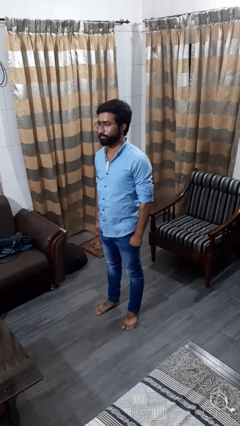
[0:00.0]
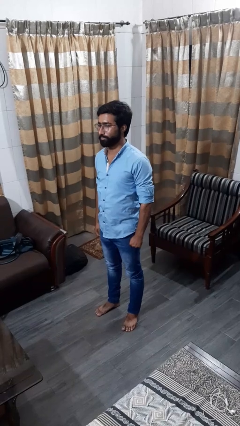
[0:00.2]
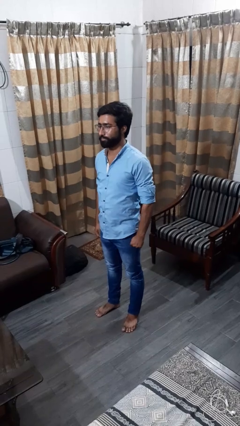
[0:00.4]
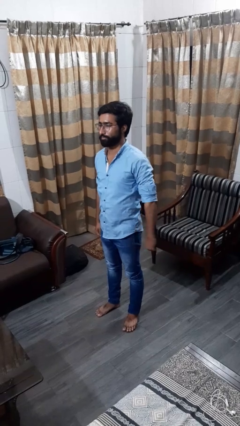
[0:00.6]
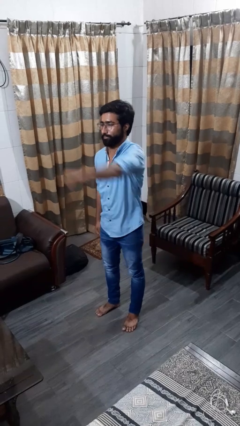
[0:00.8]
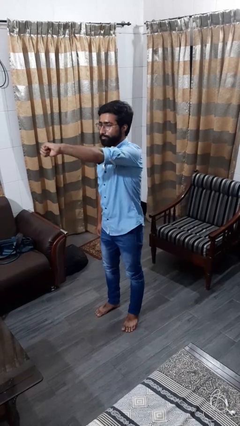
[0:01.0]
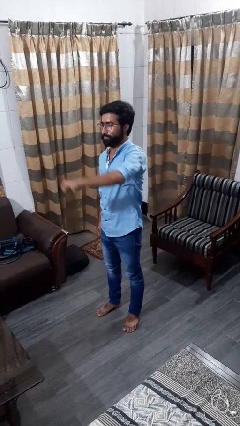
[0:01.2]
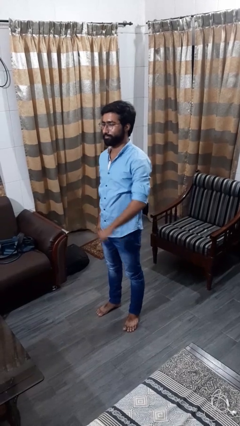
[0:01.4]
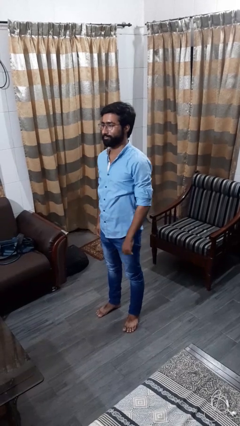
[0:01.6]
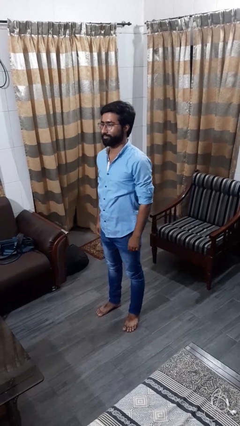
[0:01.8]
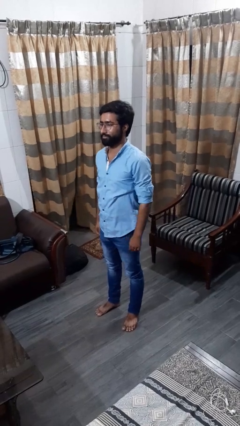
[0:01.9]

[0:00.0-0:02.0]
person punches

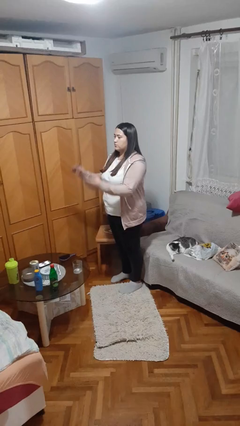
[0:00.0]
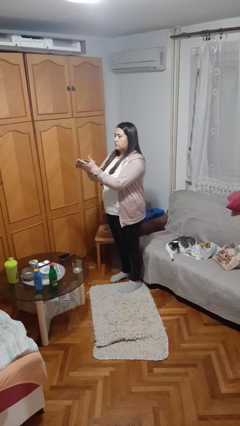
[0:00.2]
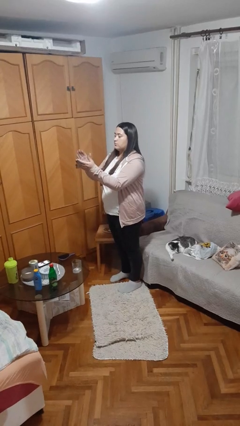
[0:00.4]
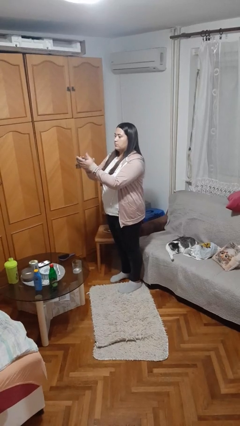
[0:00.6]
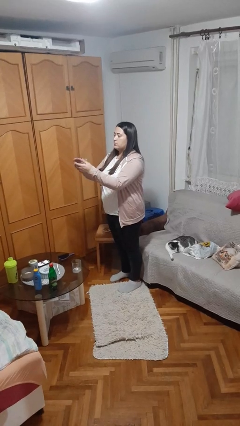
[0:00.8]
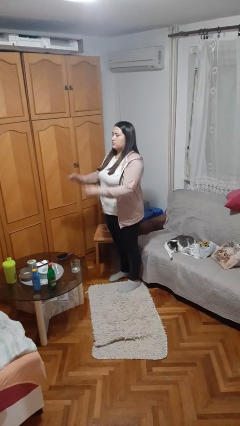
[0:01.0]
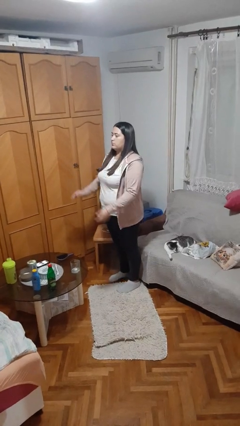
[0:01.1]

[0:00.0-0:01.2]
person claps hands

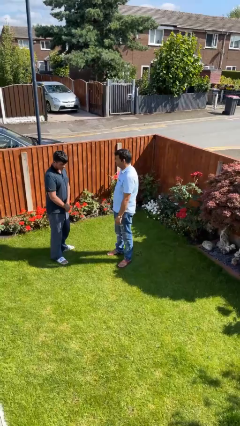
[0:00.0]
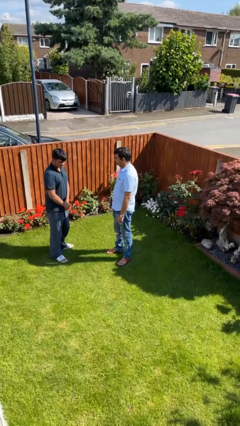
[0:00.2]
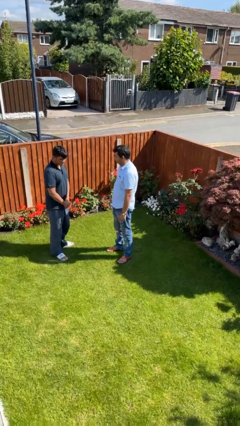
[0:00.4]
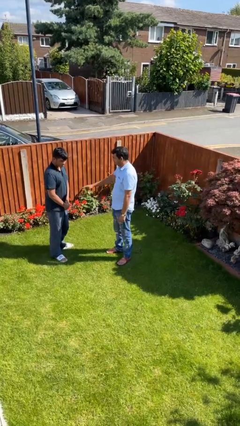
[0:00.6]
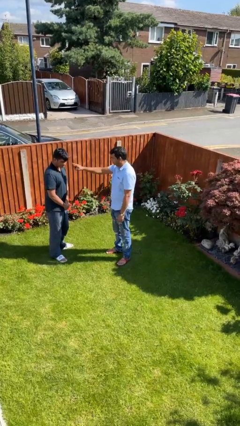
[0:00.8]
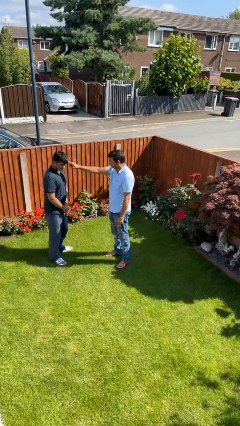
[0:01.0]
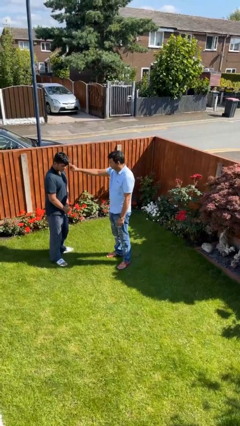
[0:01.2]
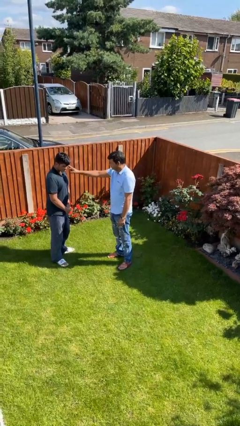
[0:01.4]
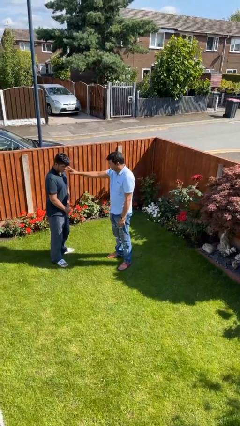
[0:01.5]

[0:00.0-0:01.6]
person touches face of person

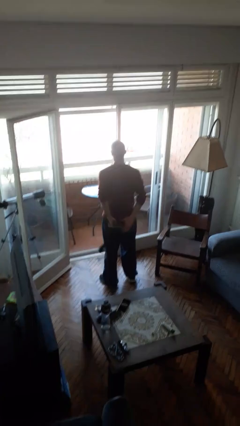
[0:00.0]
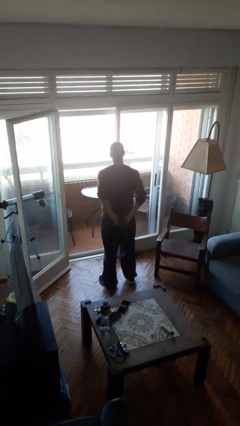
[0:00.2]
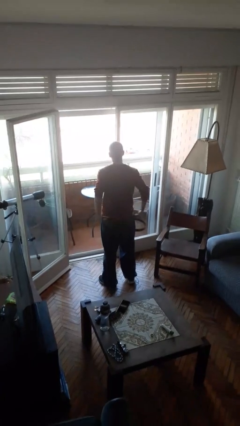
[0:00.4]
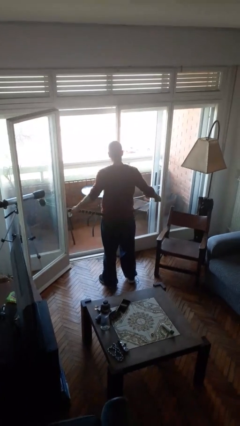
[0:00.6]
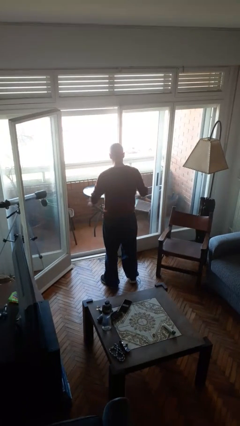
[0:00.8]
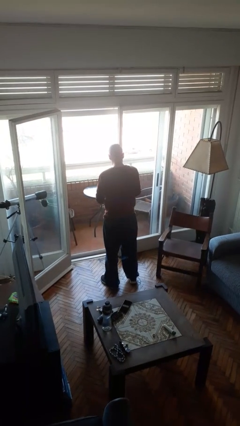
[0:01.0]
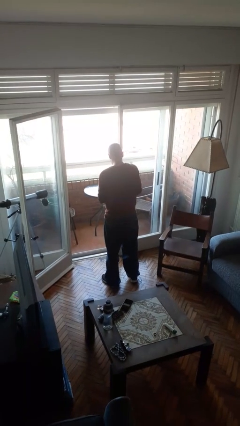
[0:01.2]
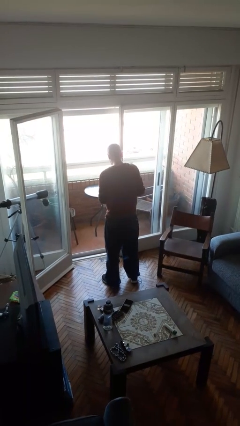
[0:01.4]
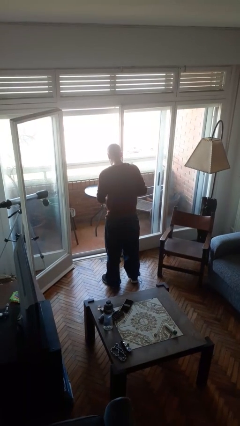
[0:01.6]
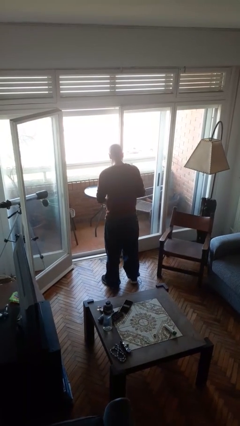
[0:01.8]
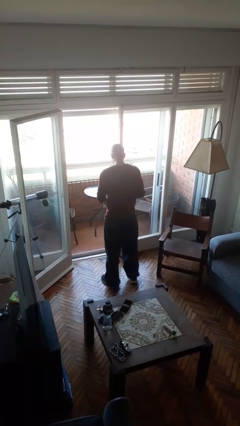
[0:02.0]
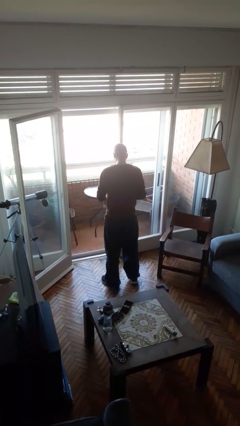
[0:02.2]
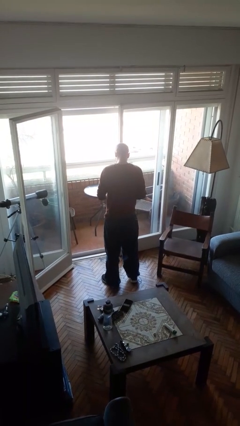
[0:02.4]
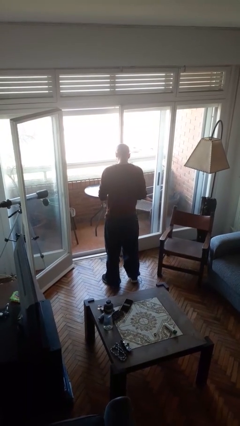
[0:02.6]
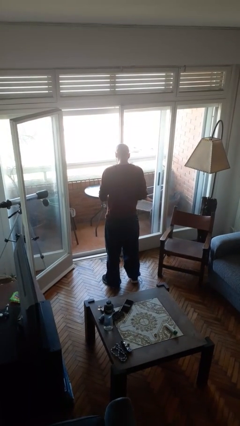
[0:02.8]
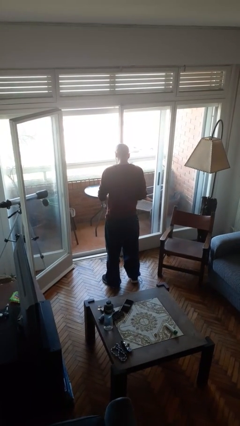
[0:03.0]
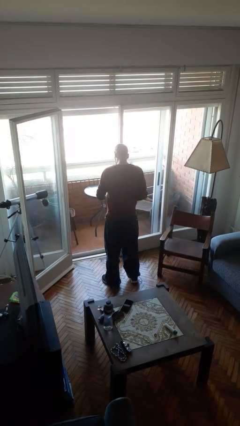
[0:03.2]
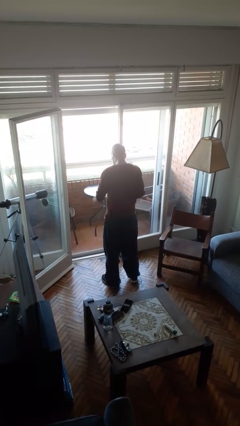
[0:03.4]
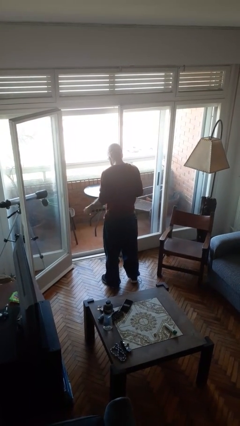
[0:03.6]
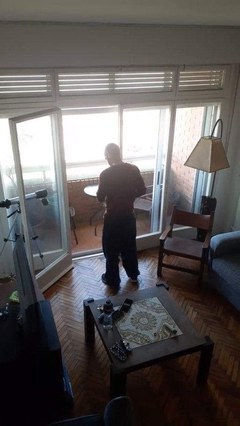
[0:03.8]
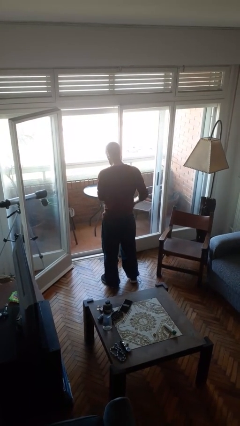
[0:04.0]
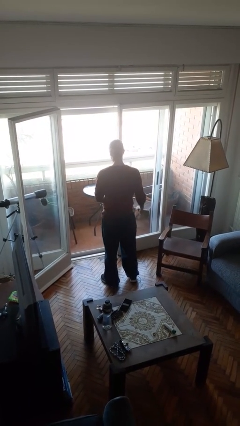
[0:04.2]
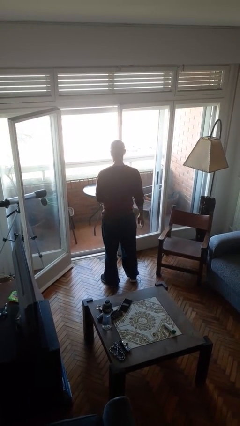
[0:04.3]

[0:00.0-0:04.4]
person puts on belt

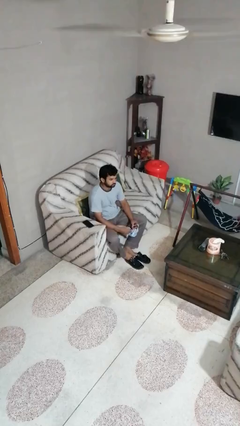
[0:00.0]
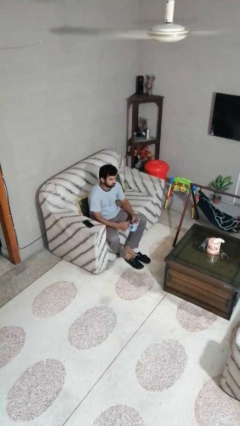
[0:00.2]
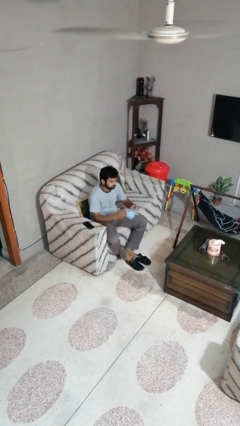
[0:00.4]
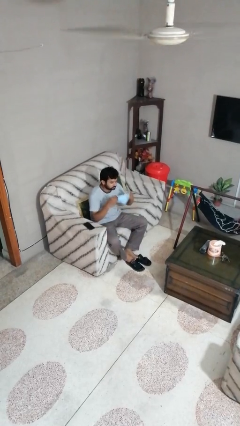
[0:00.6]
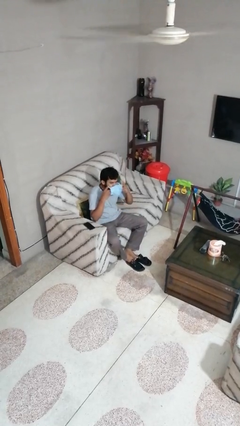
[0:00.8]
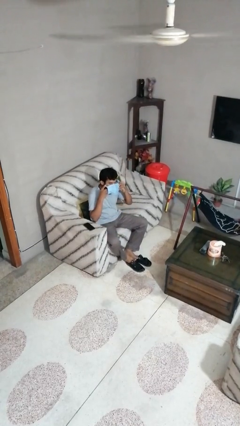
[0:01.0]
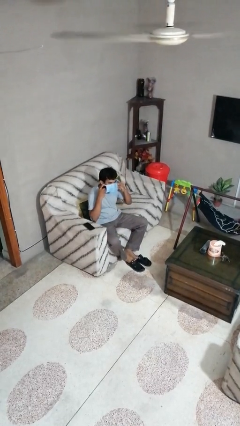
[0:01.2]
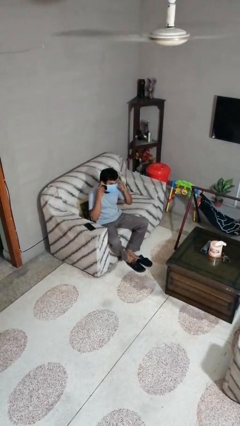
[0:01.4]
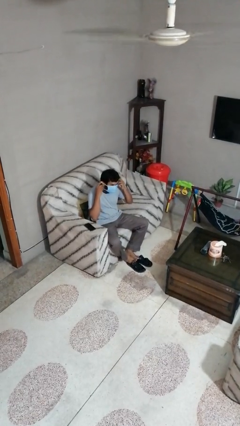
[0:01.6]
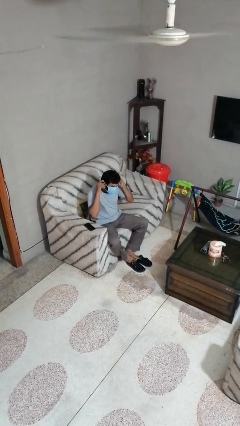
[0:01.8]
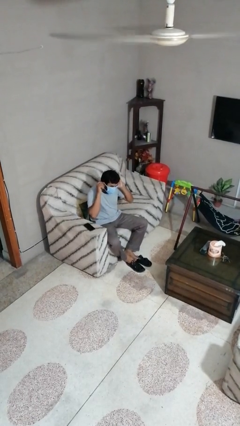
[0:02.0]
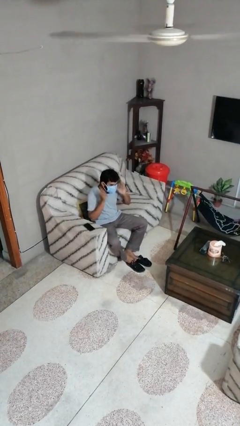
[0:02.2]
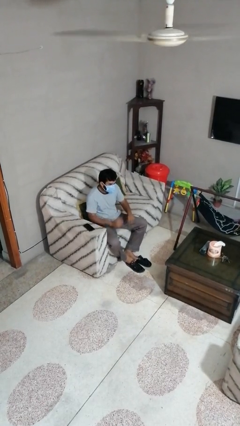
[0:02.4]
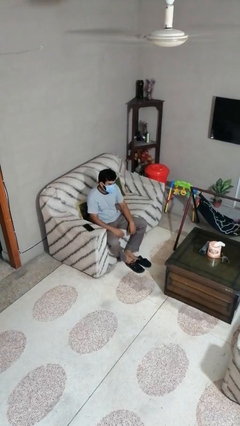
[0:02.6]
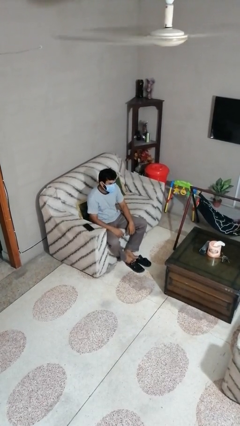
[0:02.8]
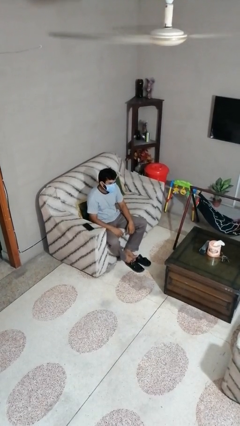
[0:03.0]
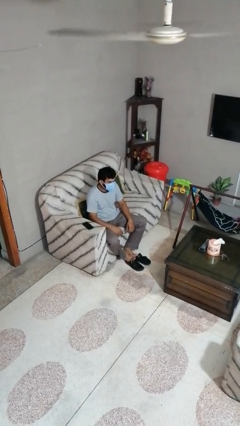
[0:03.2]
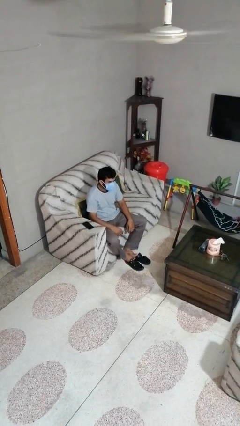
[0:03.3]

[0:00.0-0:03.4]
person puts on facemask

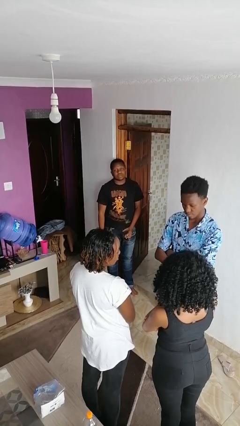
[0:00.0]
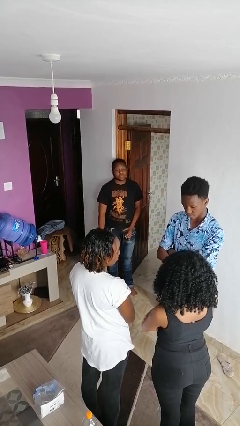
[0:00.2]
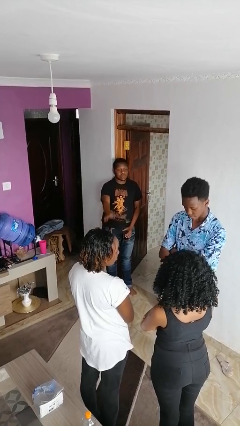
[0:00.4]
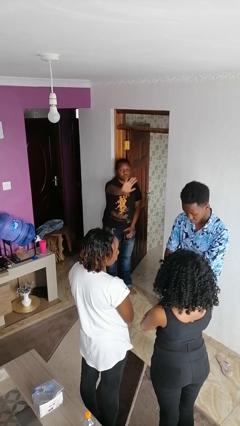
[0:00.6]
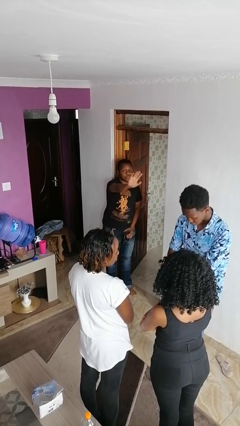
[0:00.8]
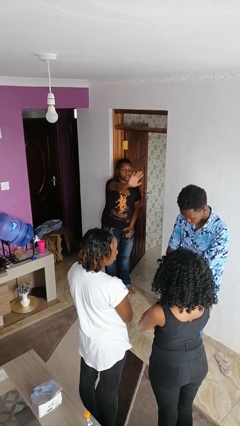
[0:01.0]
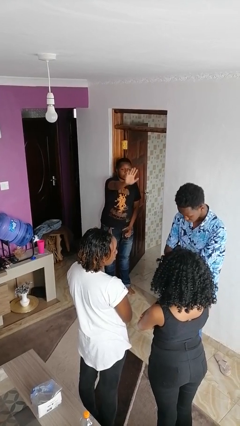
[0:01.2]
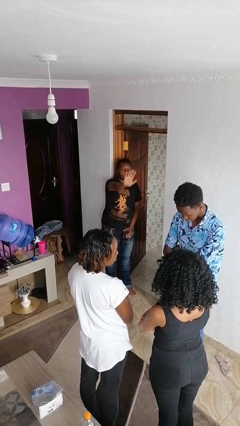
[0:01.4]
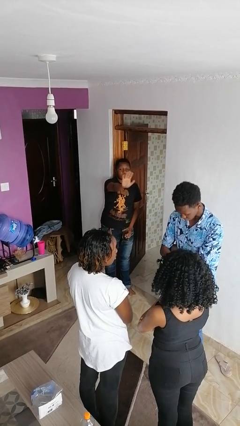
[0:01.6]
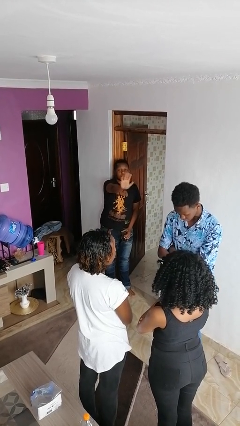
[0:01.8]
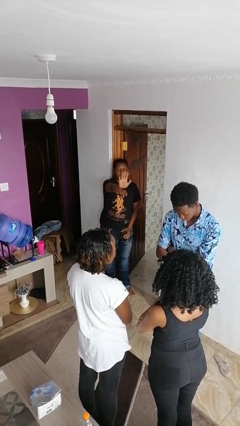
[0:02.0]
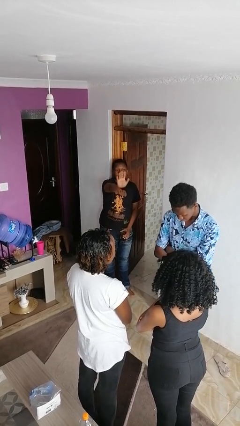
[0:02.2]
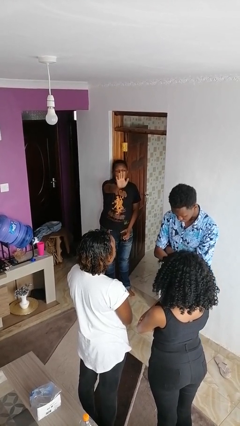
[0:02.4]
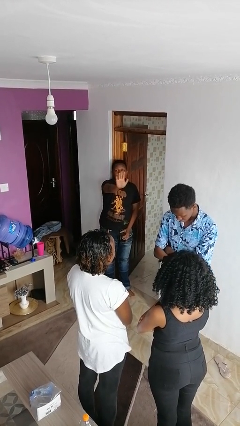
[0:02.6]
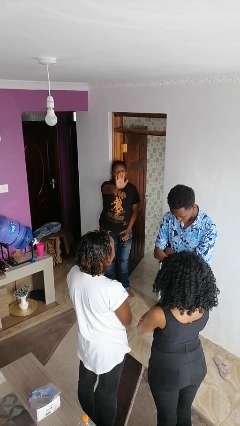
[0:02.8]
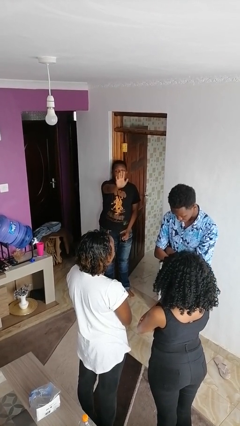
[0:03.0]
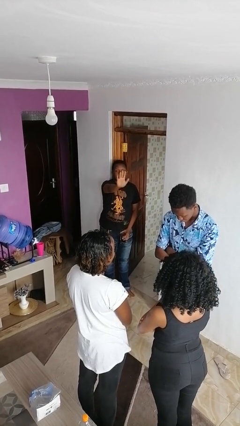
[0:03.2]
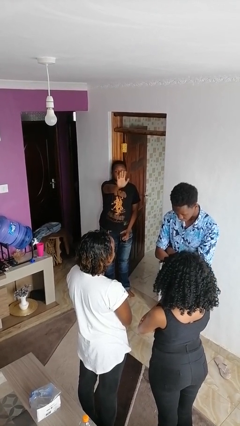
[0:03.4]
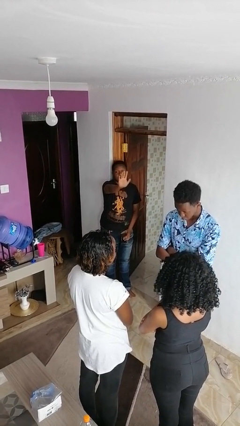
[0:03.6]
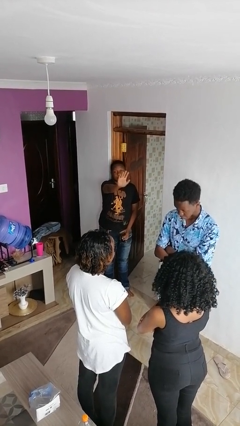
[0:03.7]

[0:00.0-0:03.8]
person waves at person

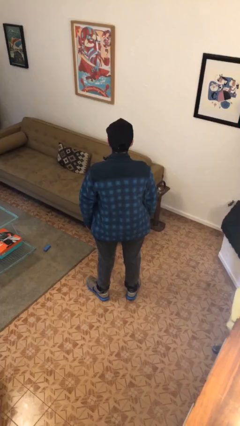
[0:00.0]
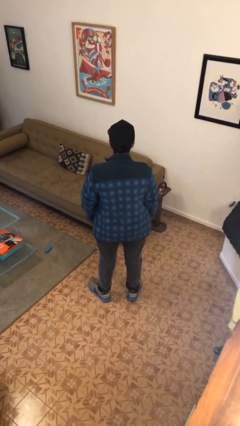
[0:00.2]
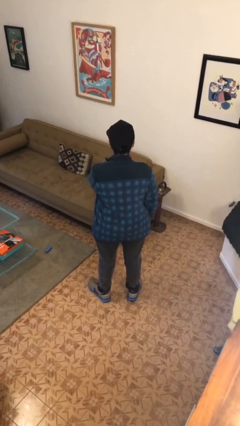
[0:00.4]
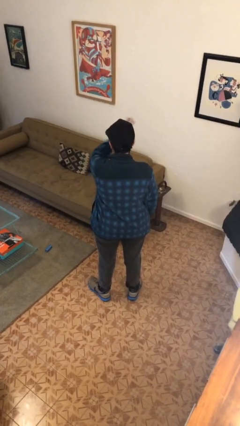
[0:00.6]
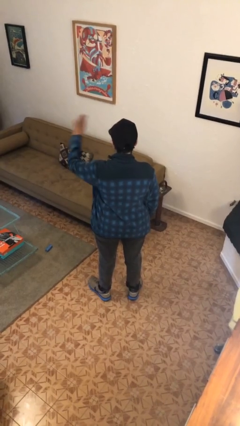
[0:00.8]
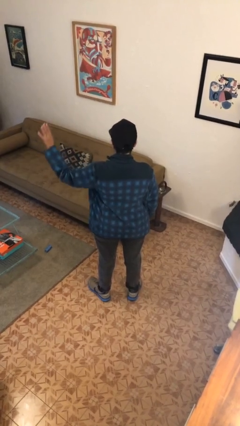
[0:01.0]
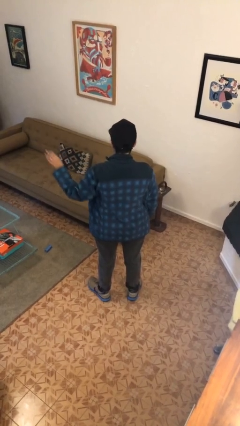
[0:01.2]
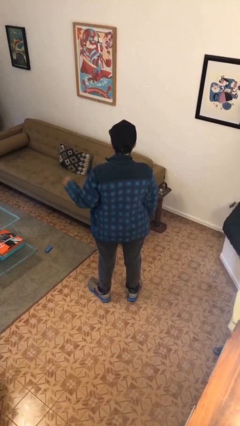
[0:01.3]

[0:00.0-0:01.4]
person gestures swipe left
